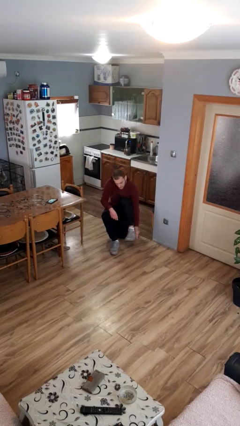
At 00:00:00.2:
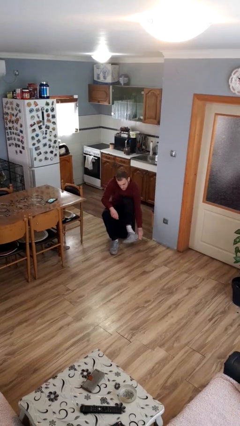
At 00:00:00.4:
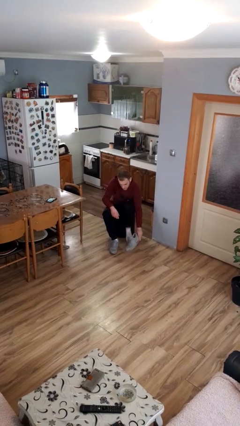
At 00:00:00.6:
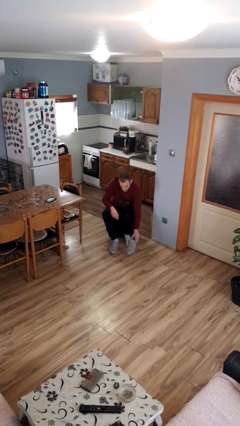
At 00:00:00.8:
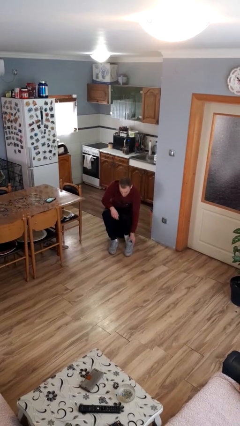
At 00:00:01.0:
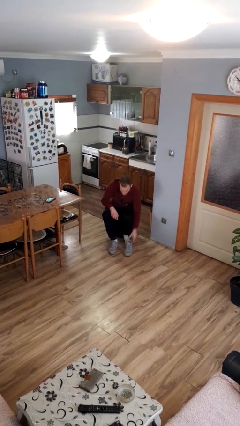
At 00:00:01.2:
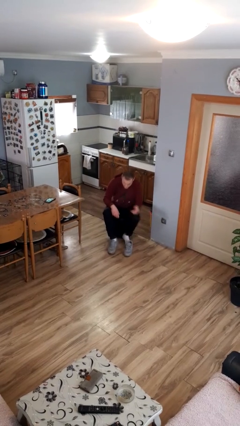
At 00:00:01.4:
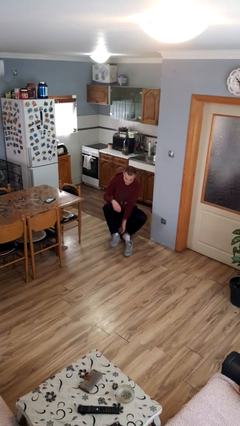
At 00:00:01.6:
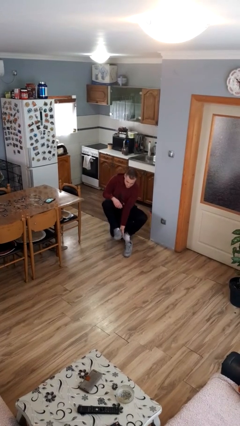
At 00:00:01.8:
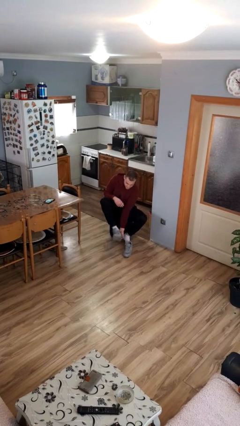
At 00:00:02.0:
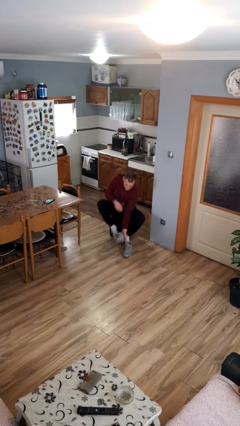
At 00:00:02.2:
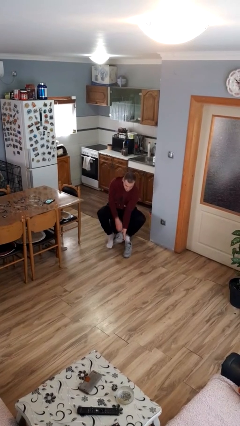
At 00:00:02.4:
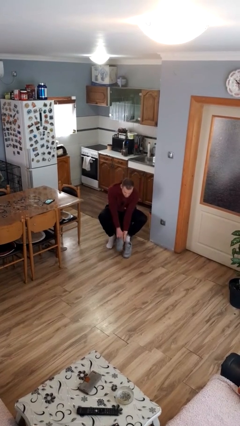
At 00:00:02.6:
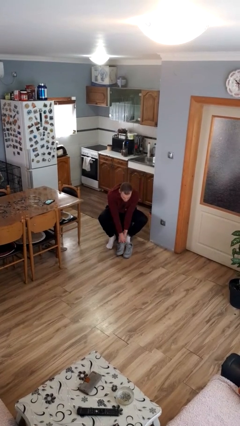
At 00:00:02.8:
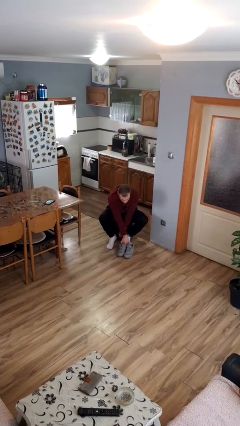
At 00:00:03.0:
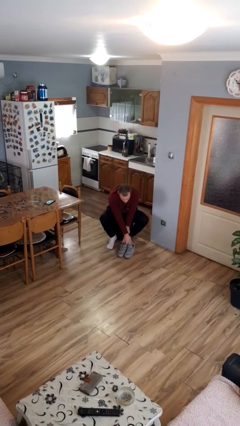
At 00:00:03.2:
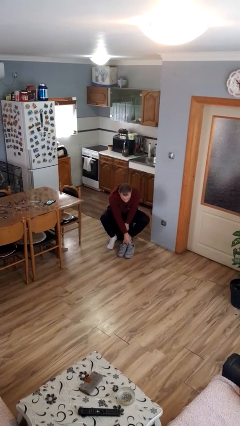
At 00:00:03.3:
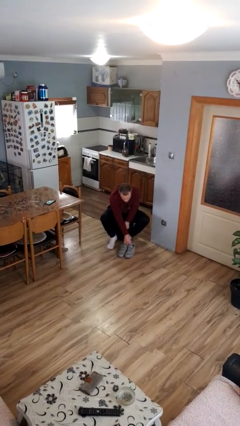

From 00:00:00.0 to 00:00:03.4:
person takes off shoes

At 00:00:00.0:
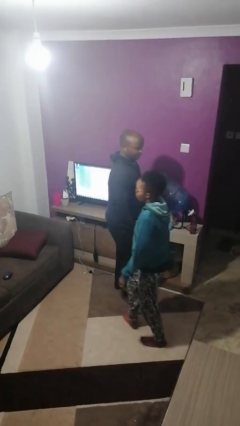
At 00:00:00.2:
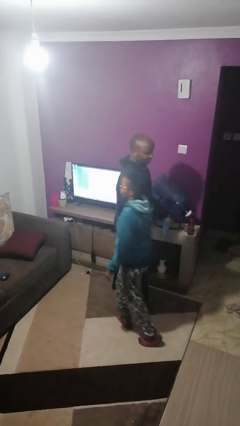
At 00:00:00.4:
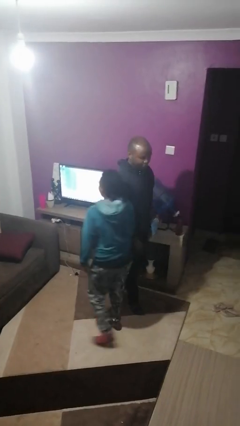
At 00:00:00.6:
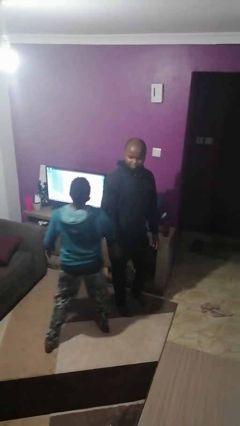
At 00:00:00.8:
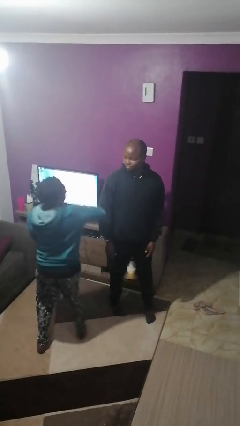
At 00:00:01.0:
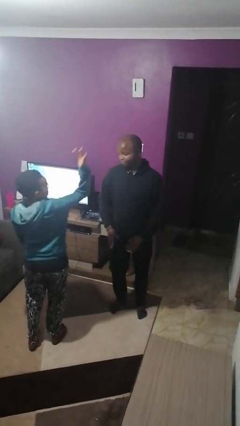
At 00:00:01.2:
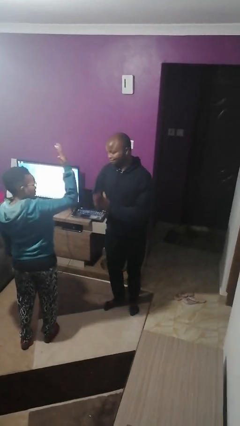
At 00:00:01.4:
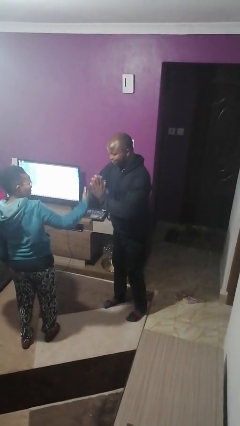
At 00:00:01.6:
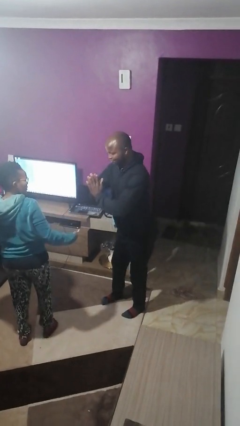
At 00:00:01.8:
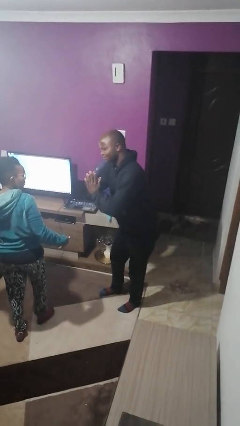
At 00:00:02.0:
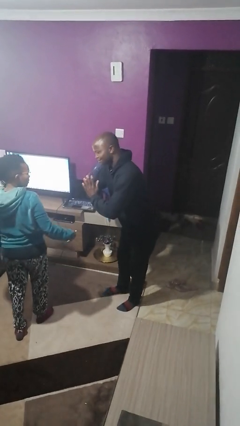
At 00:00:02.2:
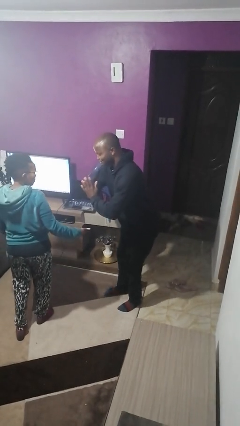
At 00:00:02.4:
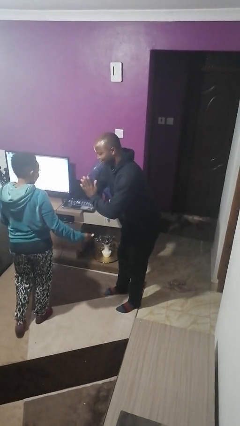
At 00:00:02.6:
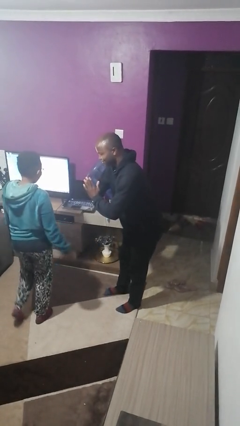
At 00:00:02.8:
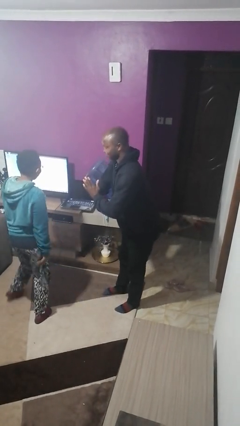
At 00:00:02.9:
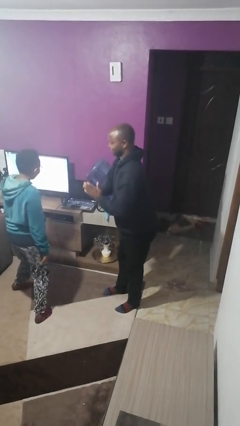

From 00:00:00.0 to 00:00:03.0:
person bumps into person

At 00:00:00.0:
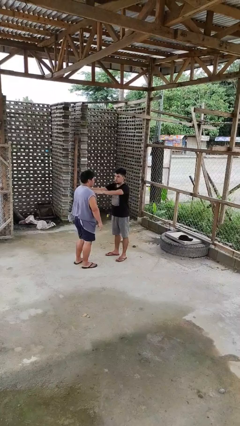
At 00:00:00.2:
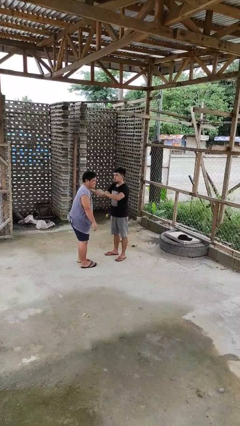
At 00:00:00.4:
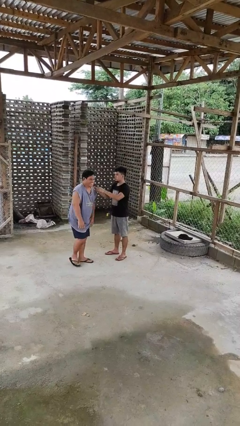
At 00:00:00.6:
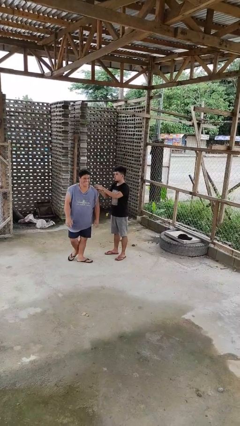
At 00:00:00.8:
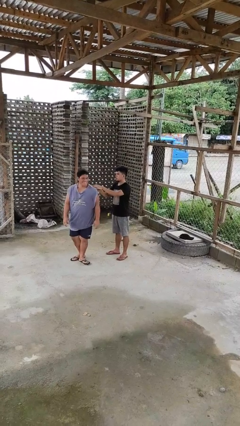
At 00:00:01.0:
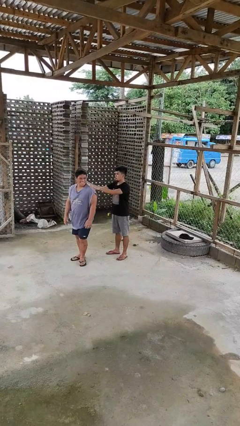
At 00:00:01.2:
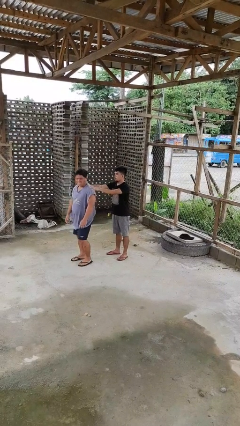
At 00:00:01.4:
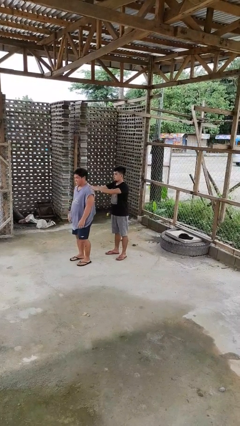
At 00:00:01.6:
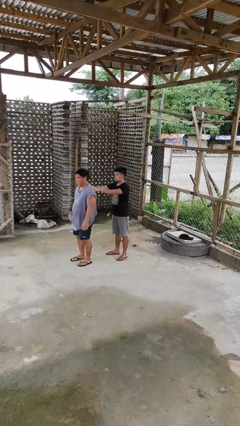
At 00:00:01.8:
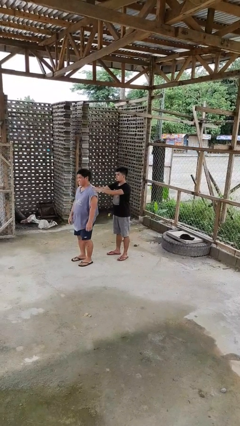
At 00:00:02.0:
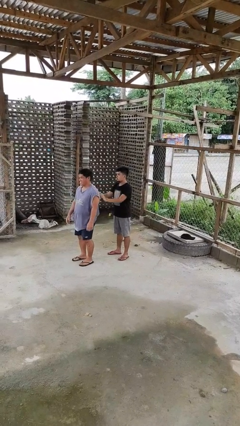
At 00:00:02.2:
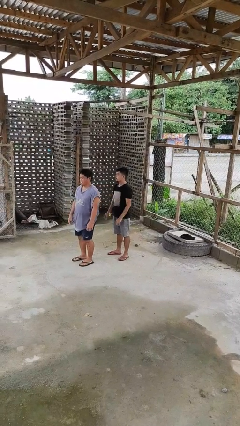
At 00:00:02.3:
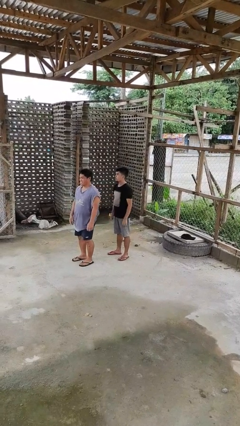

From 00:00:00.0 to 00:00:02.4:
person spins person around

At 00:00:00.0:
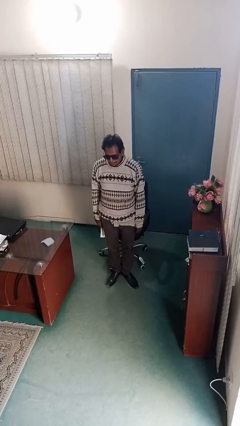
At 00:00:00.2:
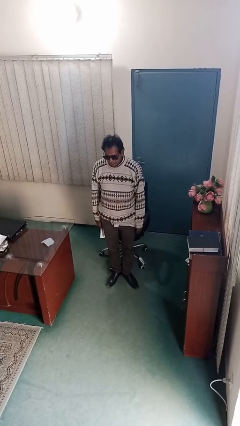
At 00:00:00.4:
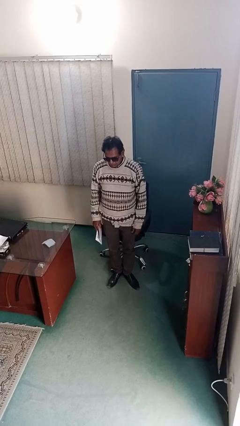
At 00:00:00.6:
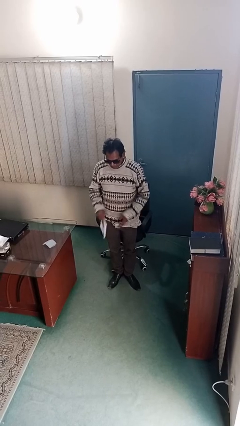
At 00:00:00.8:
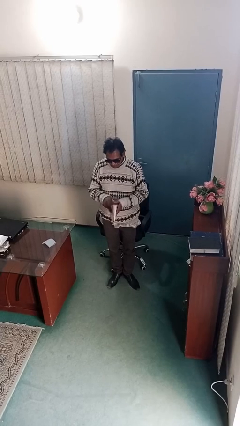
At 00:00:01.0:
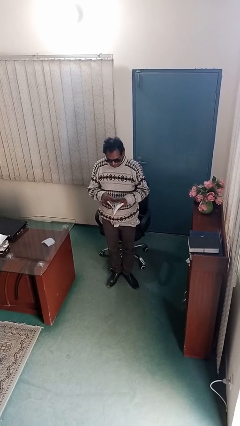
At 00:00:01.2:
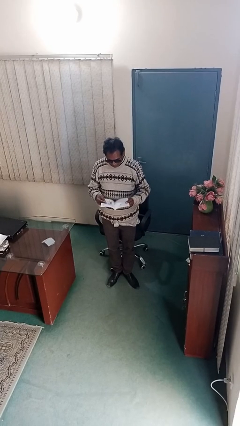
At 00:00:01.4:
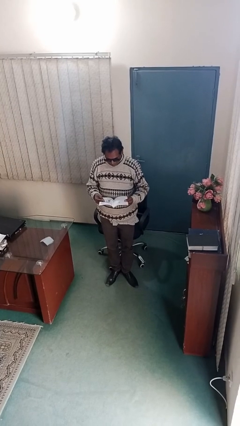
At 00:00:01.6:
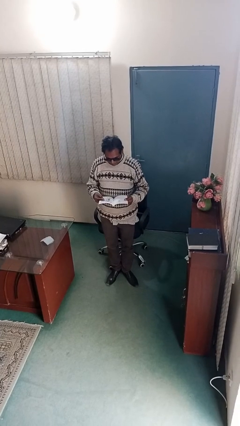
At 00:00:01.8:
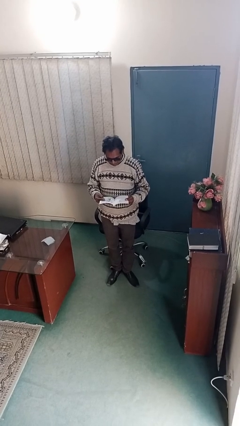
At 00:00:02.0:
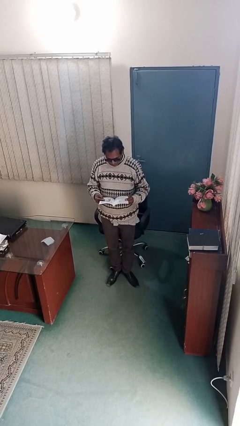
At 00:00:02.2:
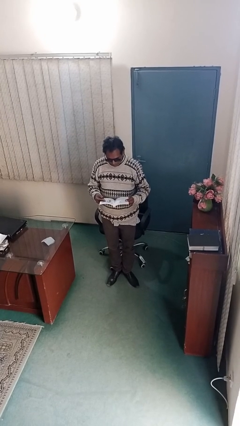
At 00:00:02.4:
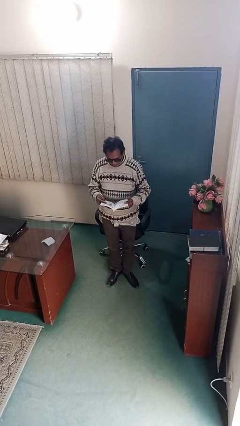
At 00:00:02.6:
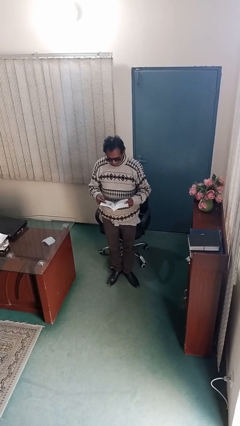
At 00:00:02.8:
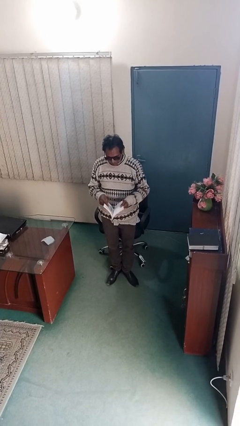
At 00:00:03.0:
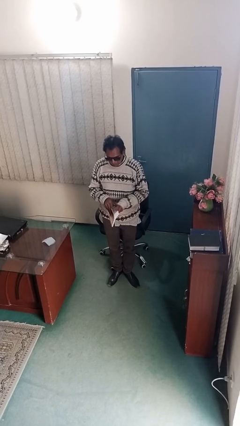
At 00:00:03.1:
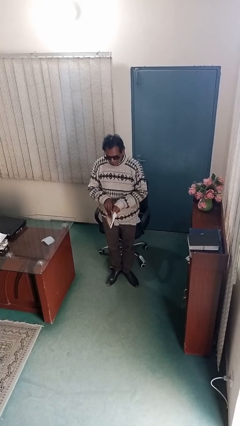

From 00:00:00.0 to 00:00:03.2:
person reads document

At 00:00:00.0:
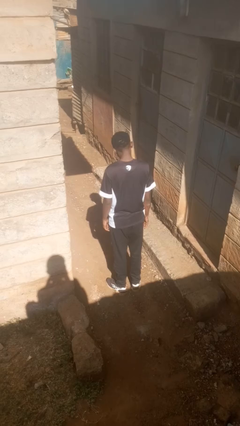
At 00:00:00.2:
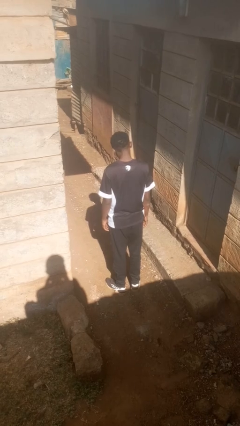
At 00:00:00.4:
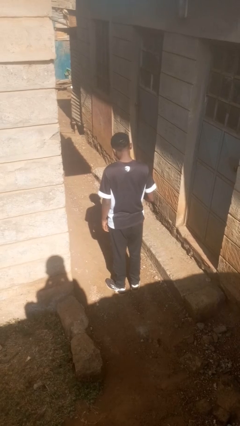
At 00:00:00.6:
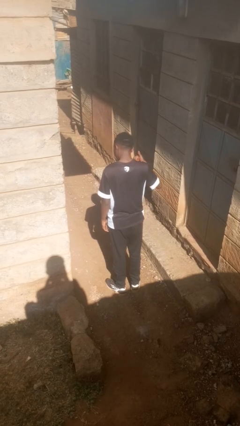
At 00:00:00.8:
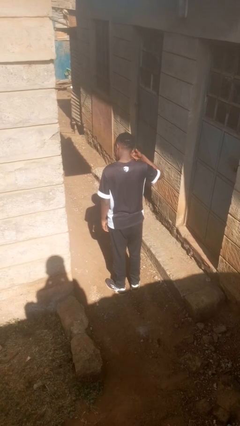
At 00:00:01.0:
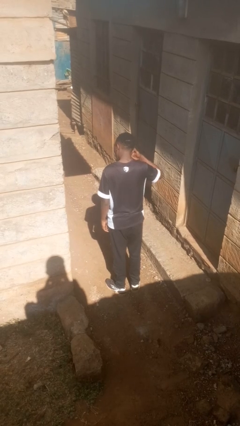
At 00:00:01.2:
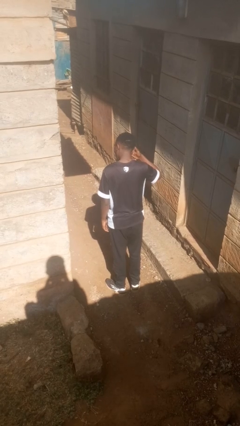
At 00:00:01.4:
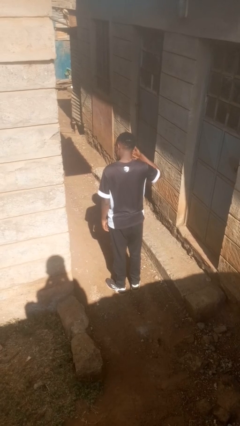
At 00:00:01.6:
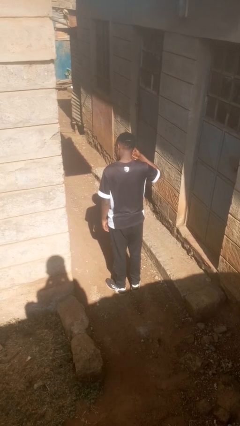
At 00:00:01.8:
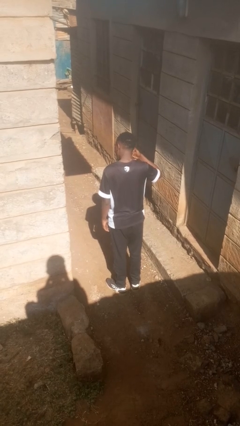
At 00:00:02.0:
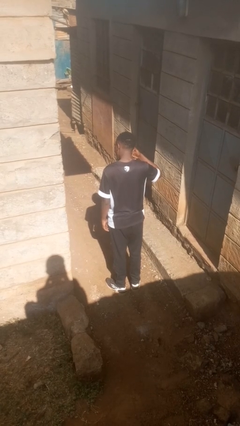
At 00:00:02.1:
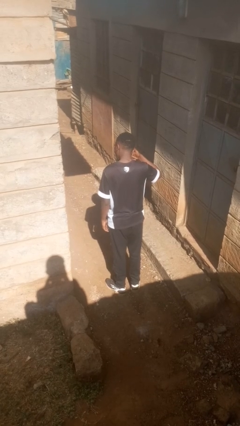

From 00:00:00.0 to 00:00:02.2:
person gestures call me

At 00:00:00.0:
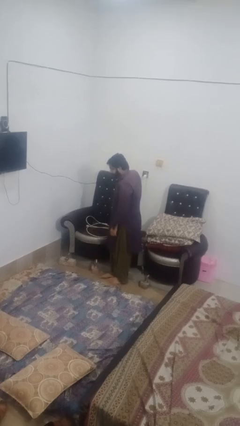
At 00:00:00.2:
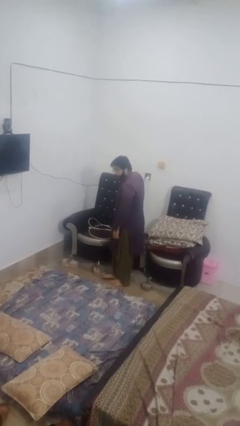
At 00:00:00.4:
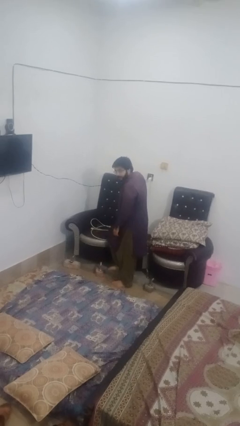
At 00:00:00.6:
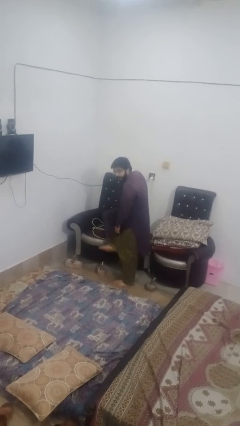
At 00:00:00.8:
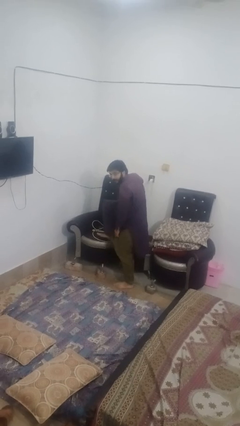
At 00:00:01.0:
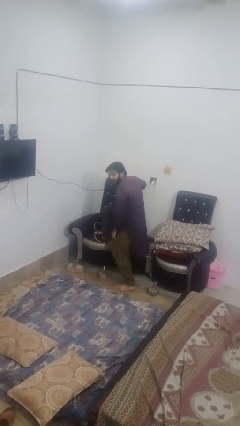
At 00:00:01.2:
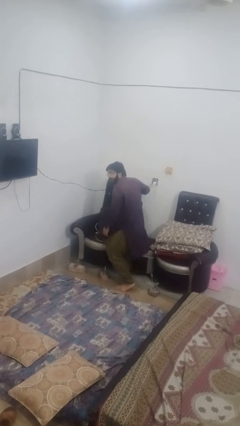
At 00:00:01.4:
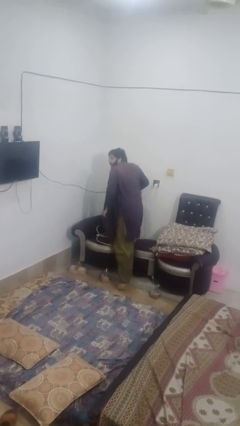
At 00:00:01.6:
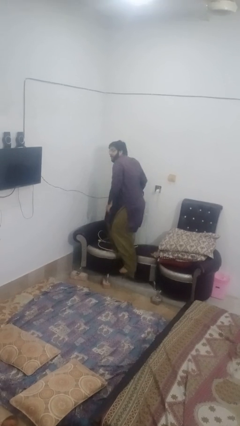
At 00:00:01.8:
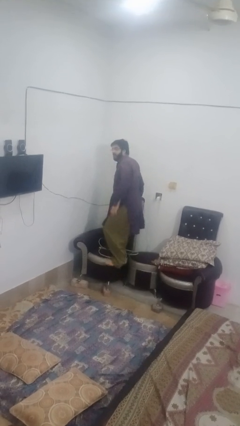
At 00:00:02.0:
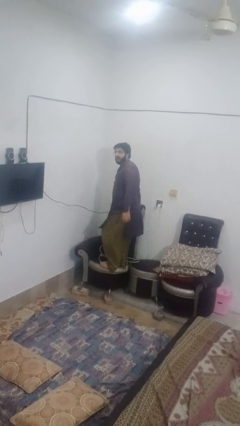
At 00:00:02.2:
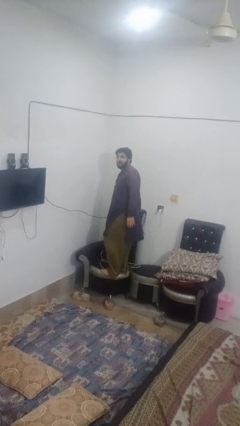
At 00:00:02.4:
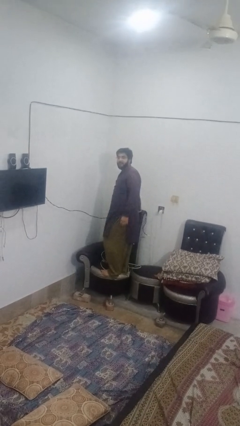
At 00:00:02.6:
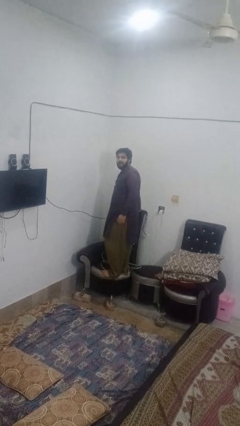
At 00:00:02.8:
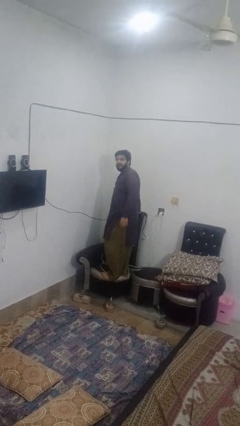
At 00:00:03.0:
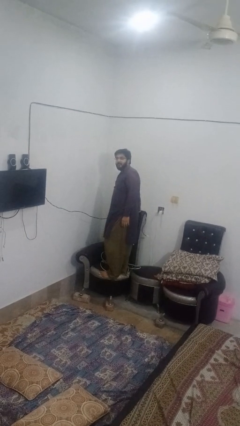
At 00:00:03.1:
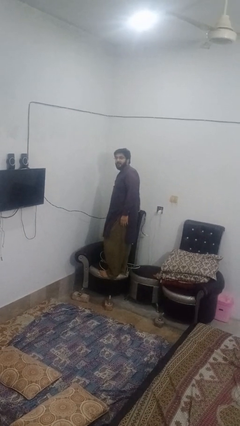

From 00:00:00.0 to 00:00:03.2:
person climbs on couch
